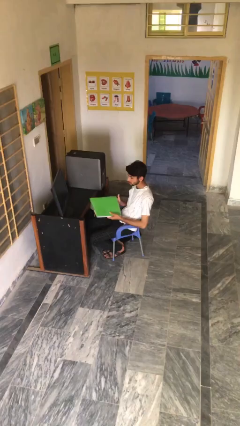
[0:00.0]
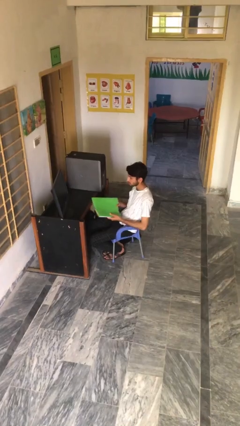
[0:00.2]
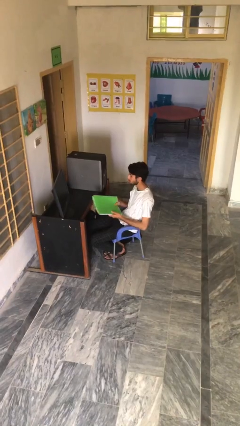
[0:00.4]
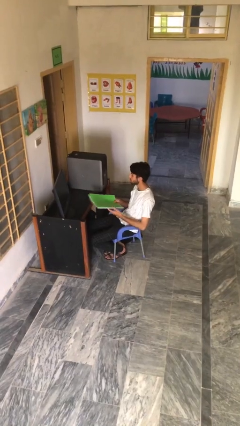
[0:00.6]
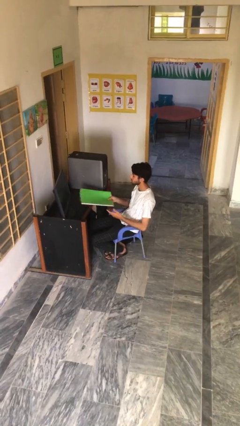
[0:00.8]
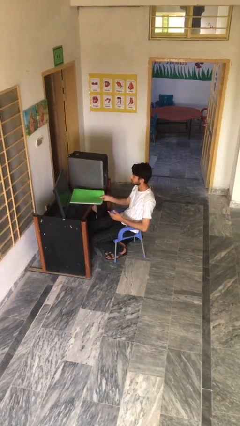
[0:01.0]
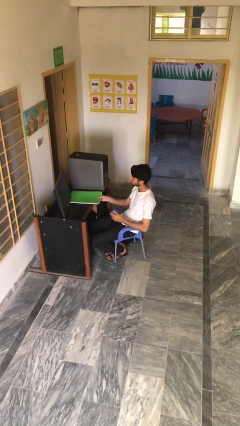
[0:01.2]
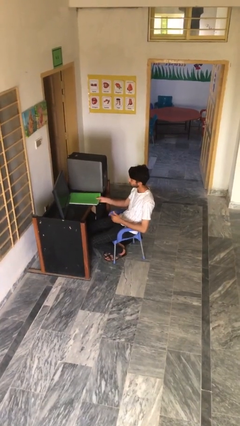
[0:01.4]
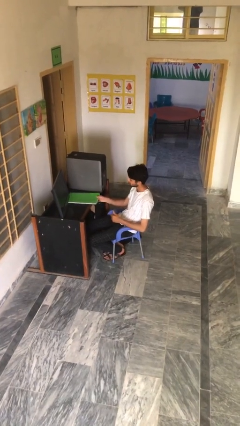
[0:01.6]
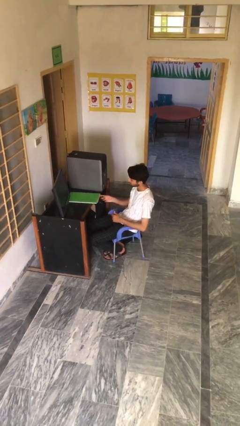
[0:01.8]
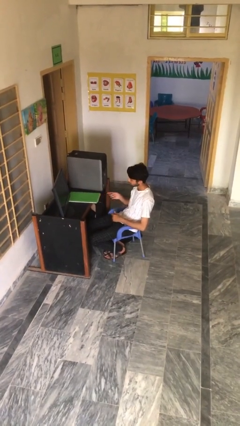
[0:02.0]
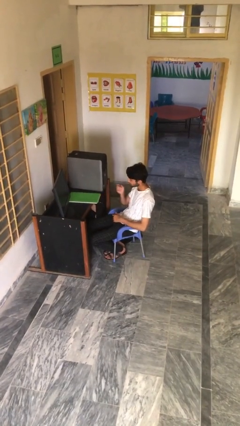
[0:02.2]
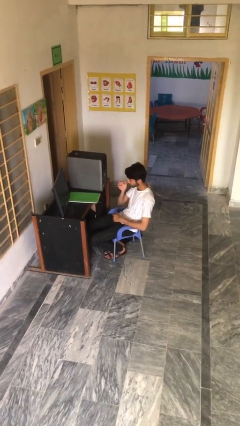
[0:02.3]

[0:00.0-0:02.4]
person puts down object on table

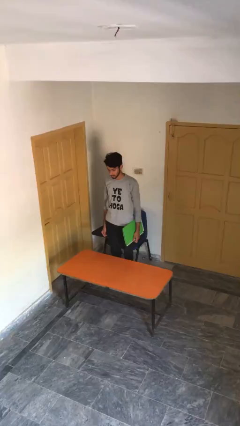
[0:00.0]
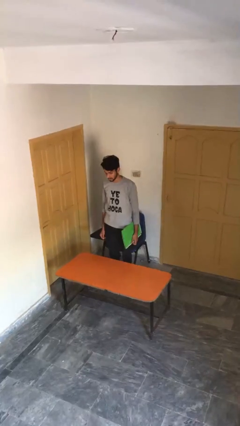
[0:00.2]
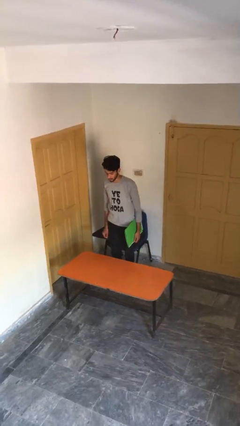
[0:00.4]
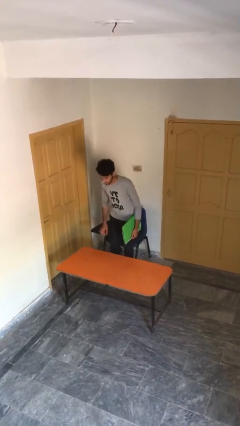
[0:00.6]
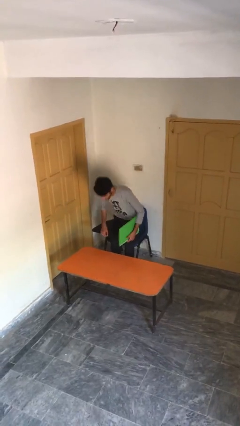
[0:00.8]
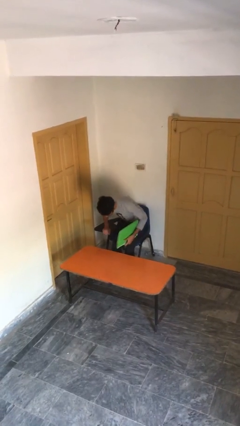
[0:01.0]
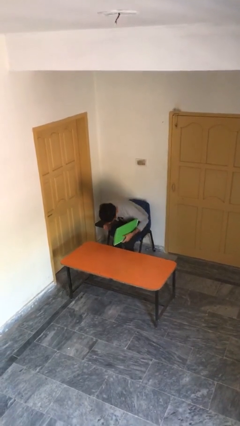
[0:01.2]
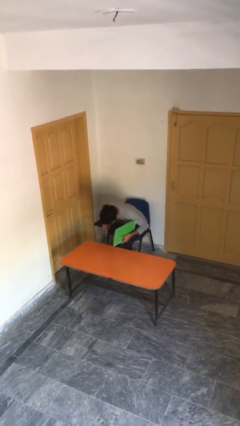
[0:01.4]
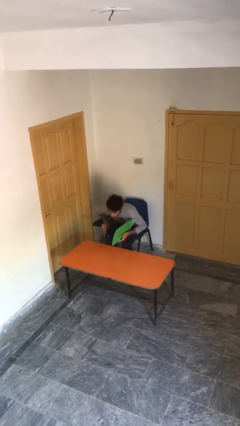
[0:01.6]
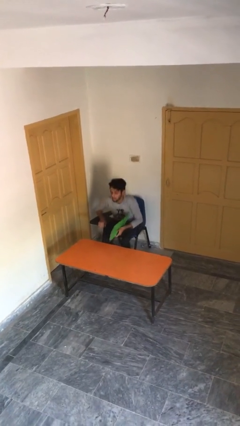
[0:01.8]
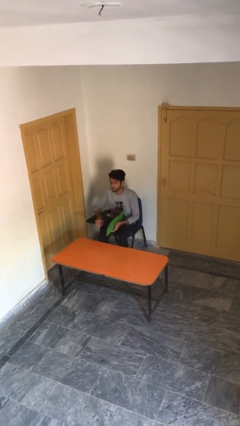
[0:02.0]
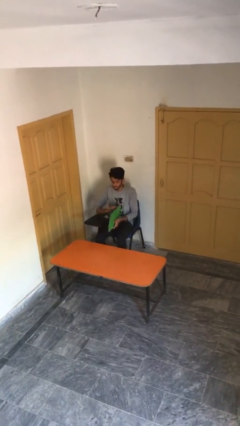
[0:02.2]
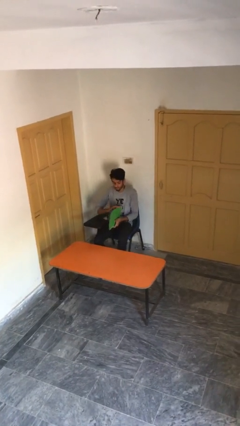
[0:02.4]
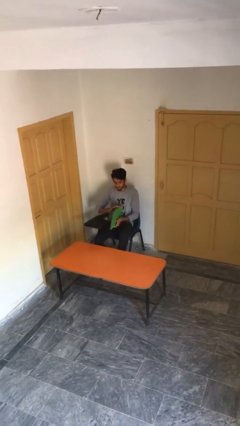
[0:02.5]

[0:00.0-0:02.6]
person sits down

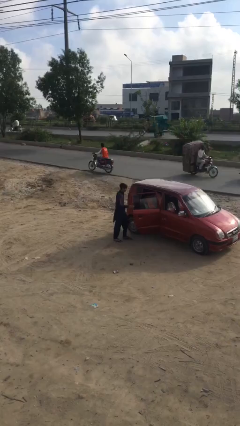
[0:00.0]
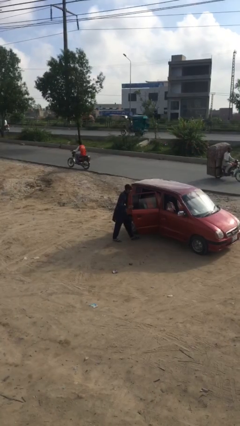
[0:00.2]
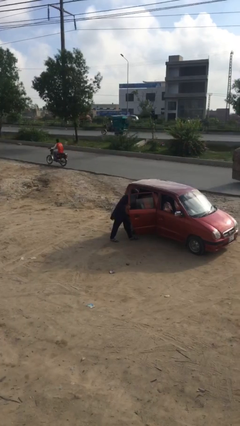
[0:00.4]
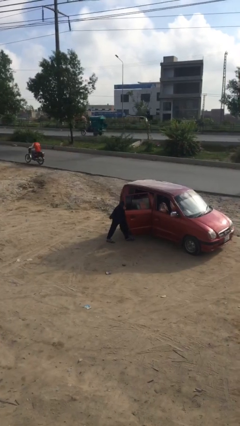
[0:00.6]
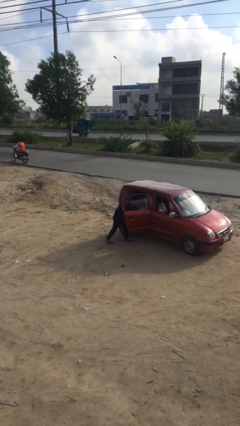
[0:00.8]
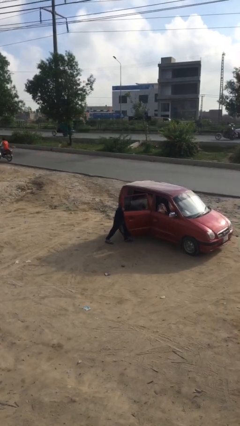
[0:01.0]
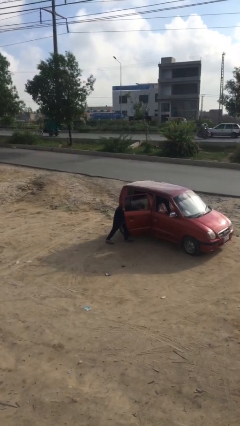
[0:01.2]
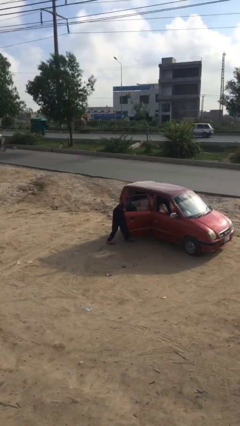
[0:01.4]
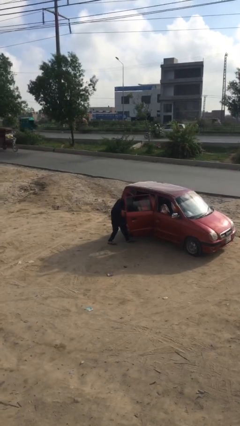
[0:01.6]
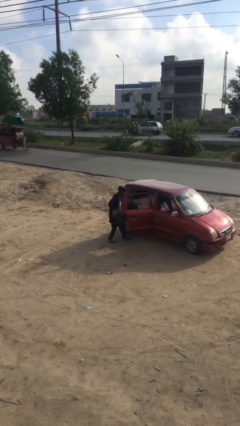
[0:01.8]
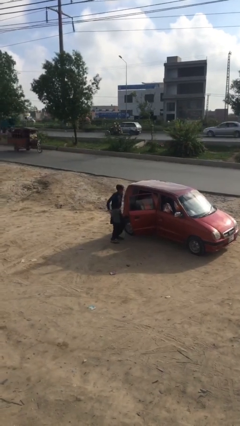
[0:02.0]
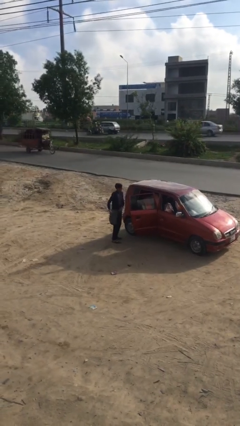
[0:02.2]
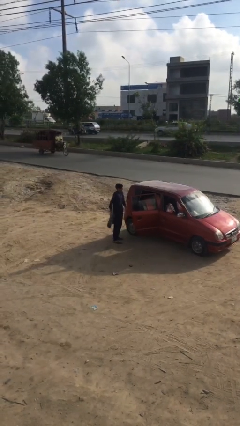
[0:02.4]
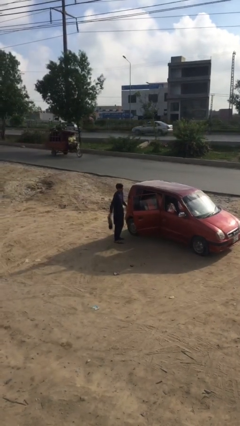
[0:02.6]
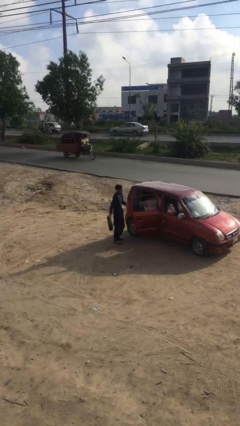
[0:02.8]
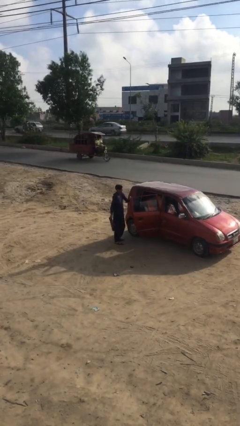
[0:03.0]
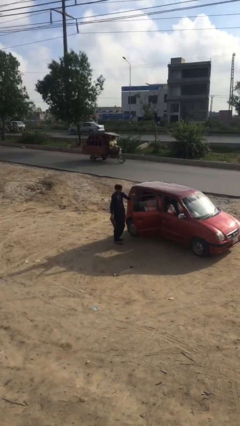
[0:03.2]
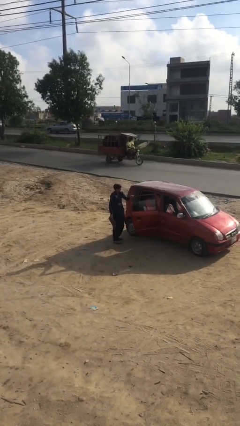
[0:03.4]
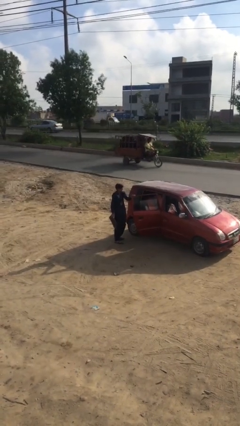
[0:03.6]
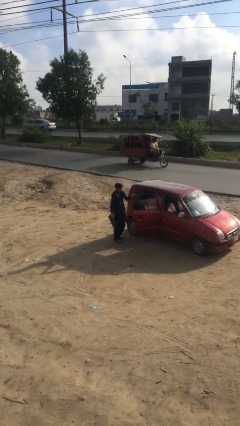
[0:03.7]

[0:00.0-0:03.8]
person unloads car

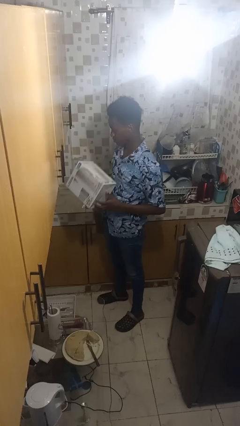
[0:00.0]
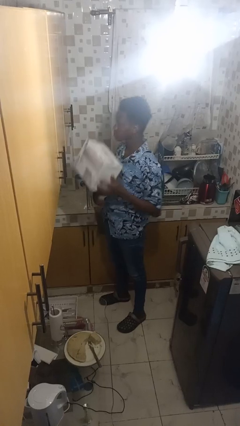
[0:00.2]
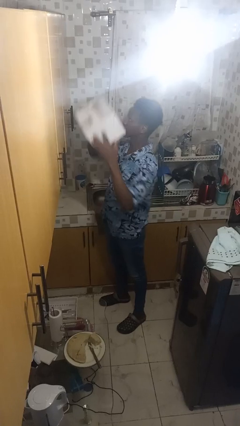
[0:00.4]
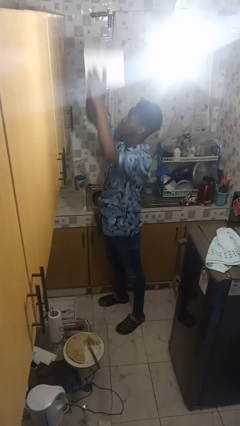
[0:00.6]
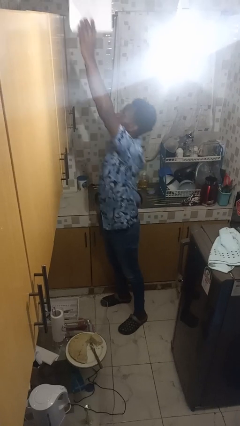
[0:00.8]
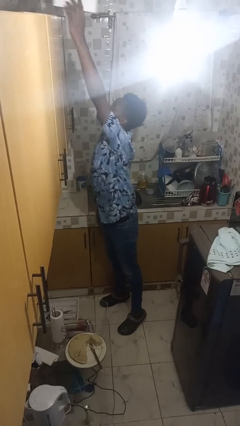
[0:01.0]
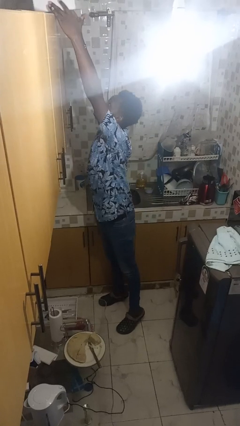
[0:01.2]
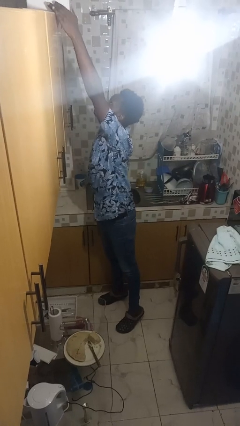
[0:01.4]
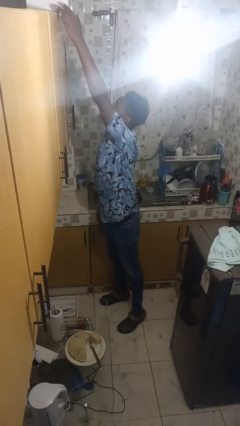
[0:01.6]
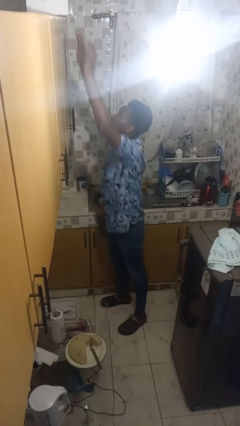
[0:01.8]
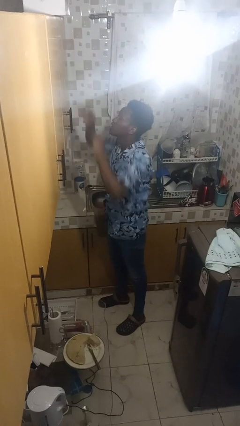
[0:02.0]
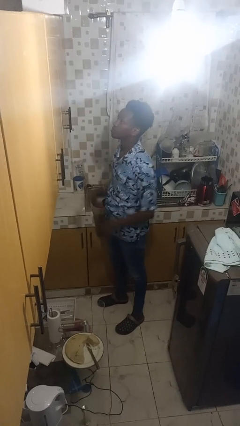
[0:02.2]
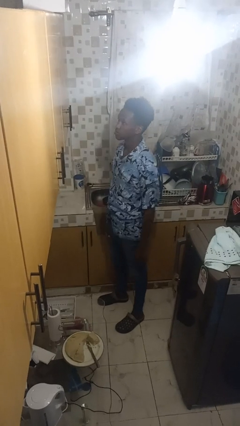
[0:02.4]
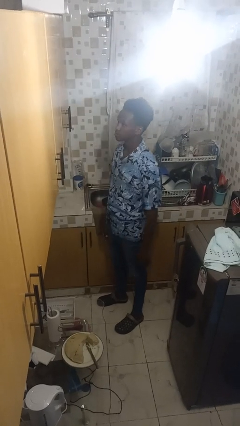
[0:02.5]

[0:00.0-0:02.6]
person puts down object on shelf

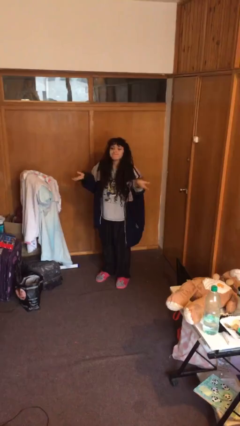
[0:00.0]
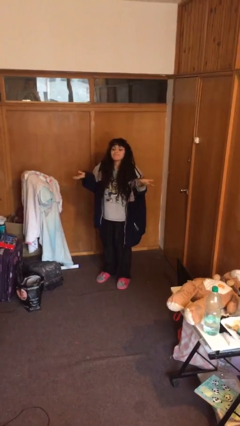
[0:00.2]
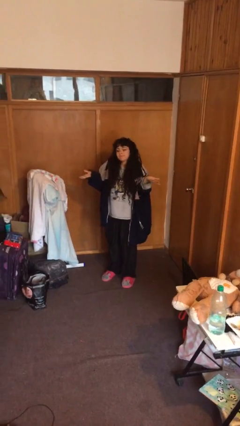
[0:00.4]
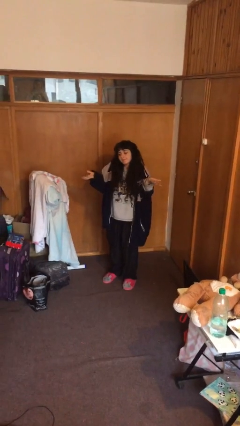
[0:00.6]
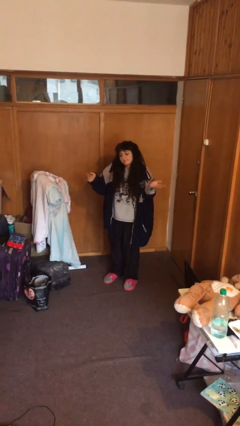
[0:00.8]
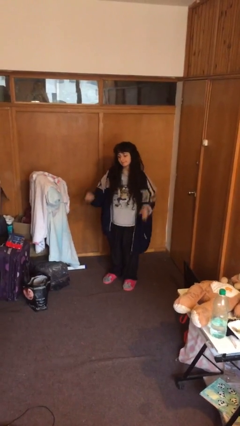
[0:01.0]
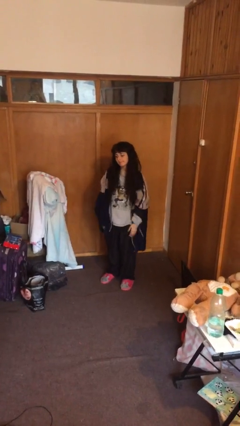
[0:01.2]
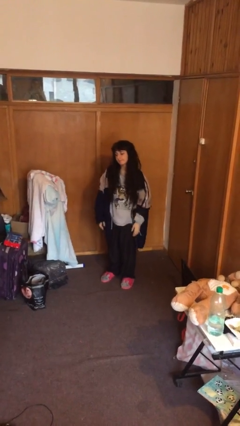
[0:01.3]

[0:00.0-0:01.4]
person shrugs

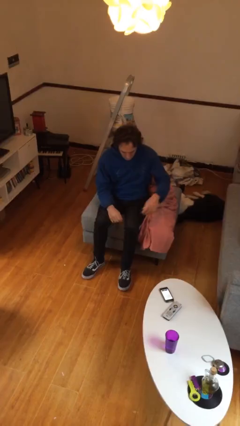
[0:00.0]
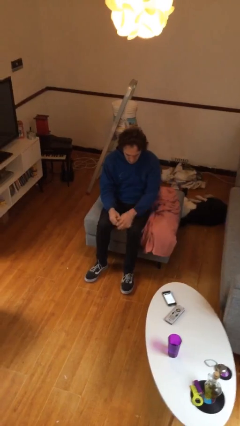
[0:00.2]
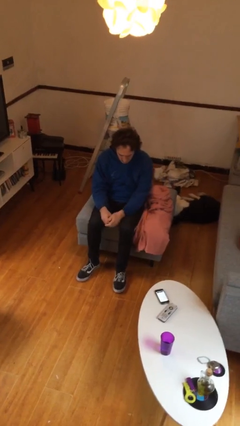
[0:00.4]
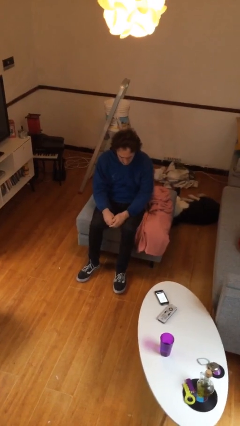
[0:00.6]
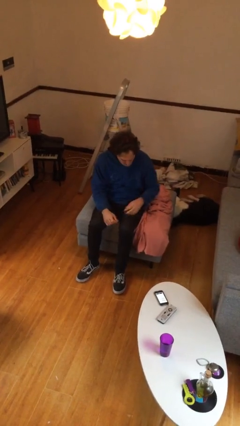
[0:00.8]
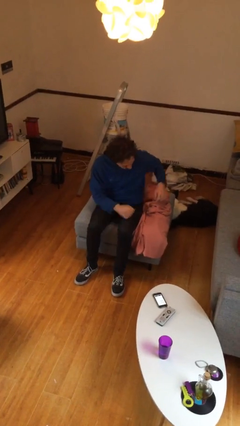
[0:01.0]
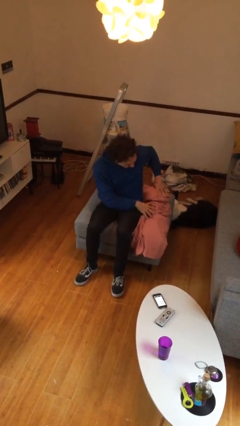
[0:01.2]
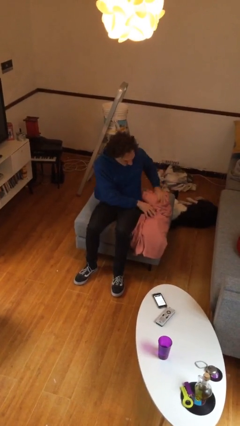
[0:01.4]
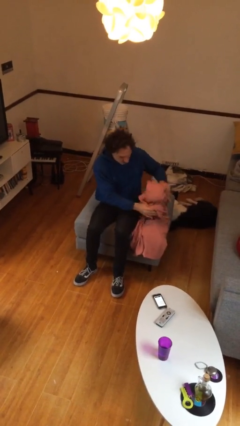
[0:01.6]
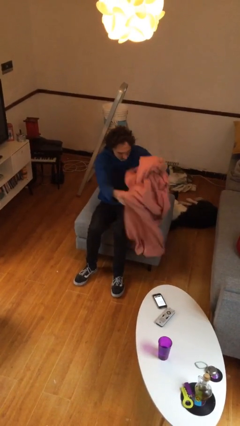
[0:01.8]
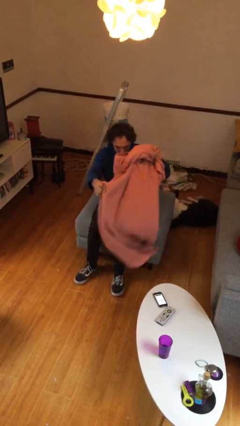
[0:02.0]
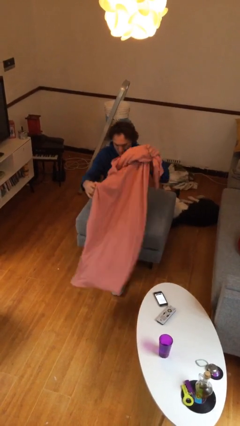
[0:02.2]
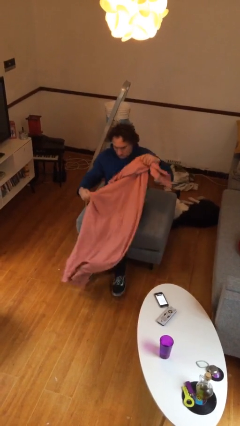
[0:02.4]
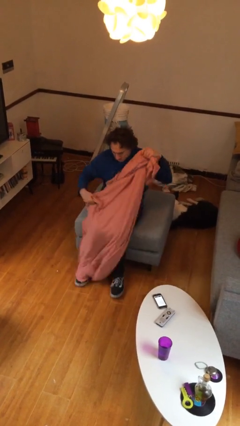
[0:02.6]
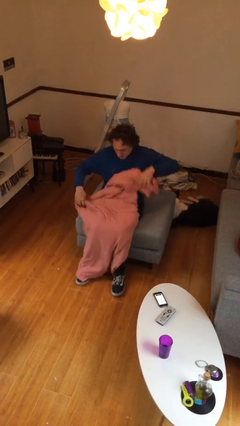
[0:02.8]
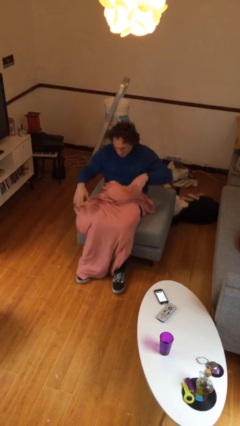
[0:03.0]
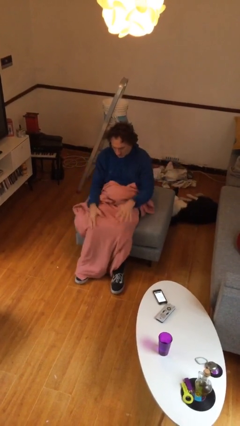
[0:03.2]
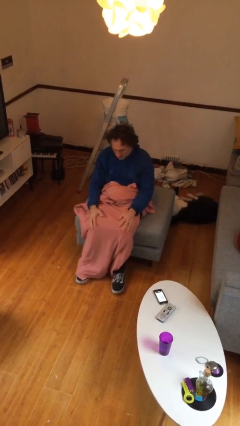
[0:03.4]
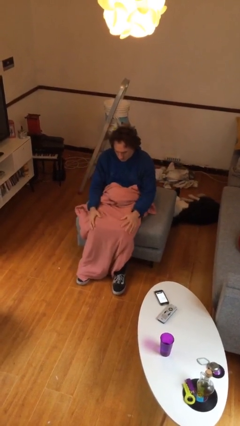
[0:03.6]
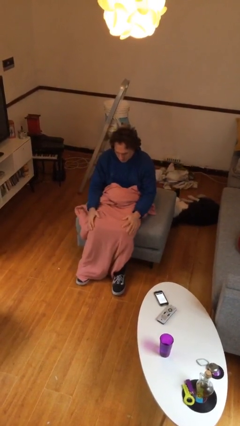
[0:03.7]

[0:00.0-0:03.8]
person covers with blanket

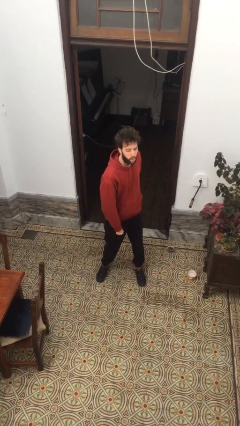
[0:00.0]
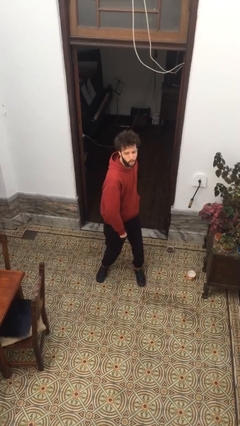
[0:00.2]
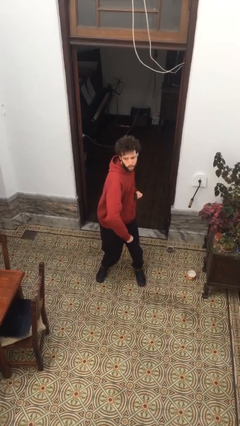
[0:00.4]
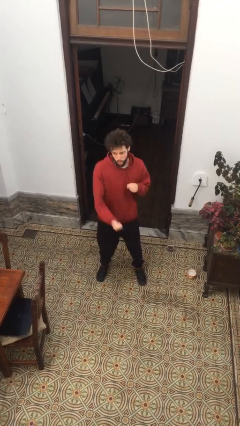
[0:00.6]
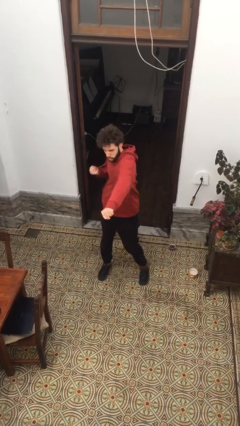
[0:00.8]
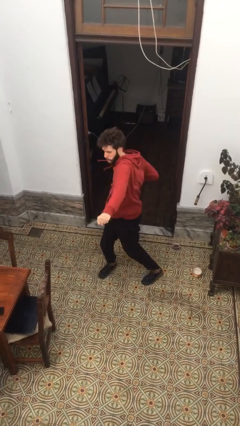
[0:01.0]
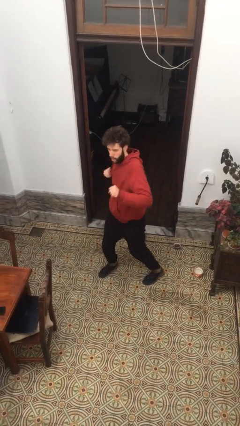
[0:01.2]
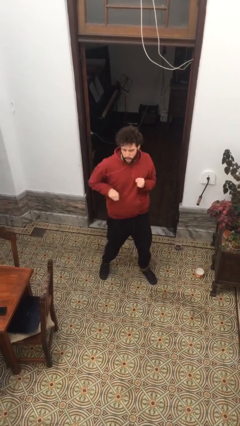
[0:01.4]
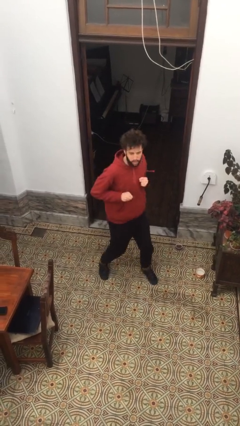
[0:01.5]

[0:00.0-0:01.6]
person punches
